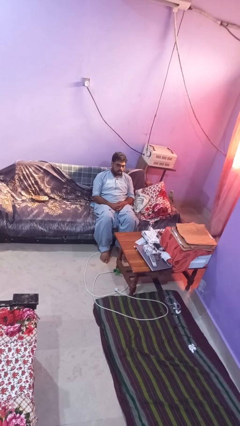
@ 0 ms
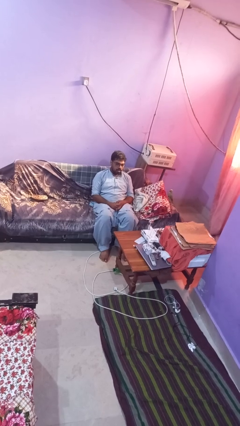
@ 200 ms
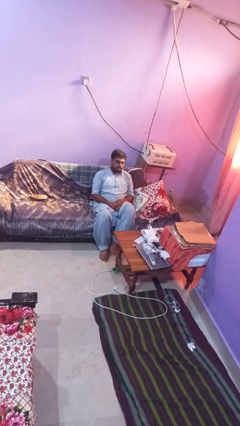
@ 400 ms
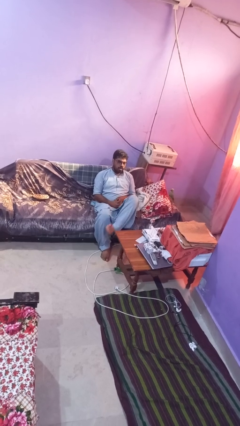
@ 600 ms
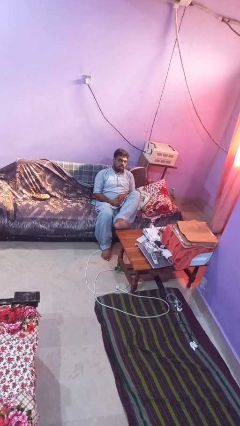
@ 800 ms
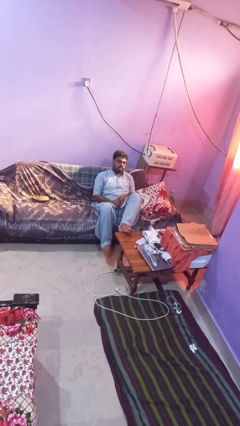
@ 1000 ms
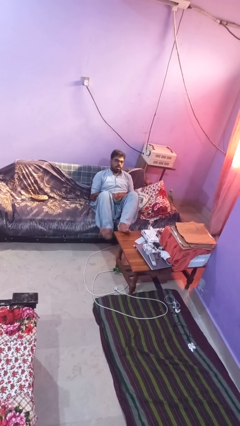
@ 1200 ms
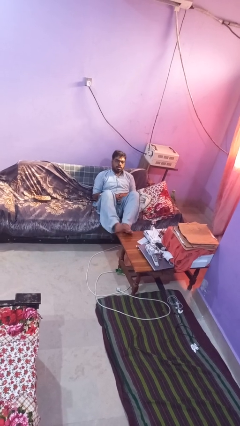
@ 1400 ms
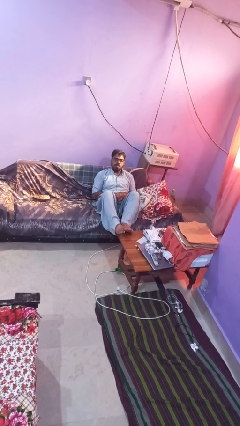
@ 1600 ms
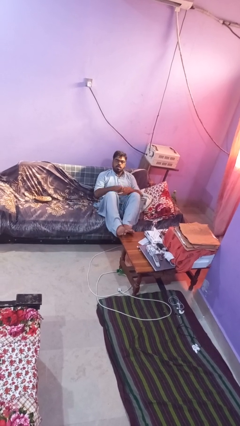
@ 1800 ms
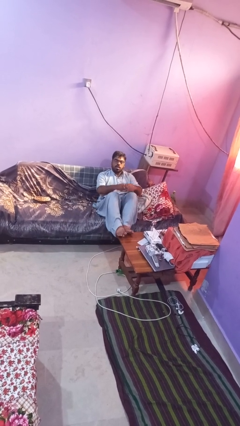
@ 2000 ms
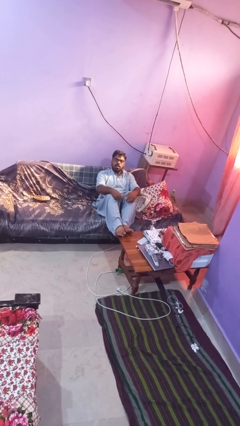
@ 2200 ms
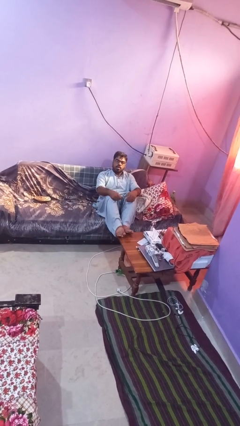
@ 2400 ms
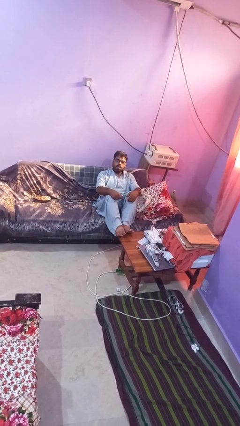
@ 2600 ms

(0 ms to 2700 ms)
person puts feet up

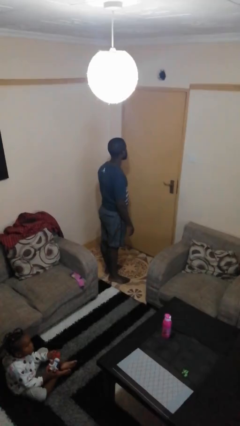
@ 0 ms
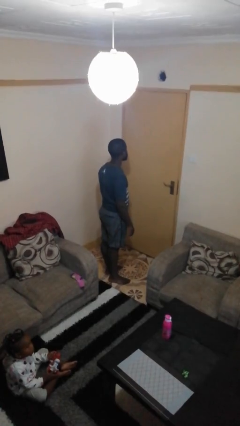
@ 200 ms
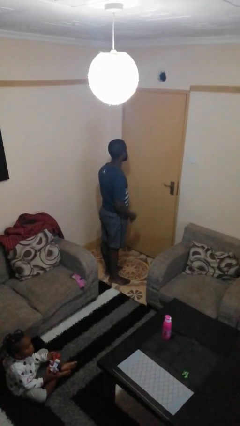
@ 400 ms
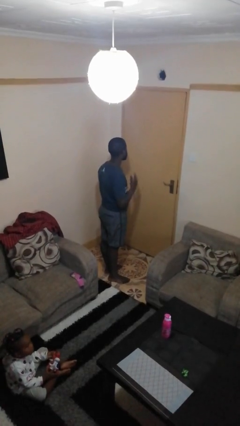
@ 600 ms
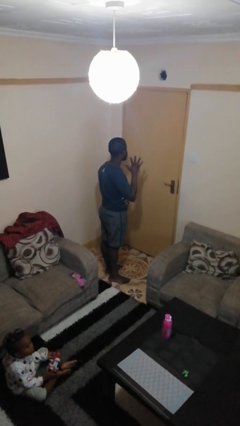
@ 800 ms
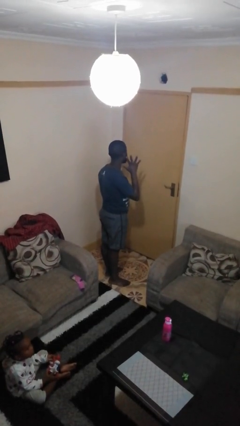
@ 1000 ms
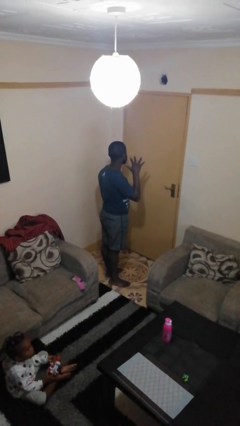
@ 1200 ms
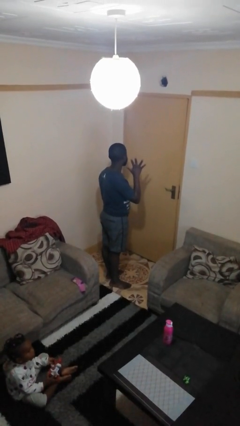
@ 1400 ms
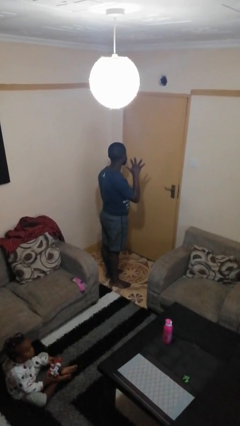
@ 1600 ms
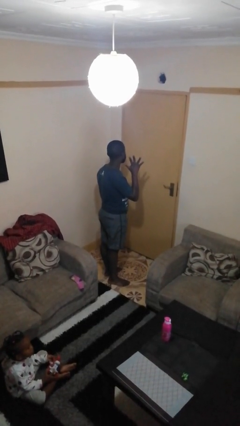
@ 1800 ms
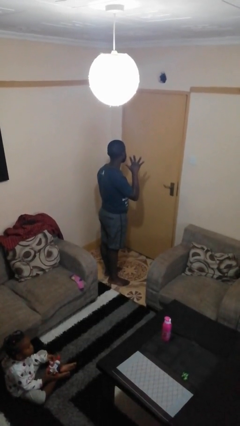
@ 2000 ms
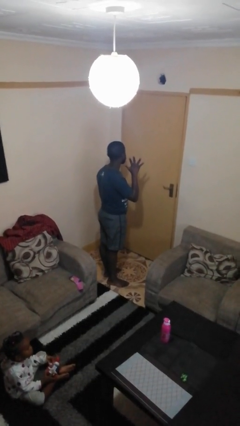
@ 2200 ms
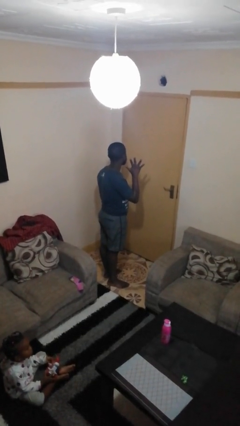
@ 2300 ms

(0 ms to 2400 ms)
person gestures number five

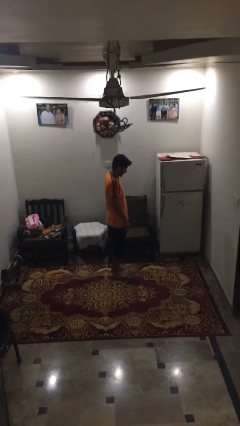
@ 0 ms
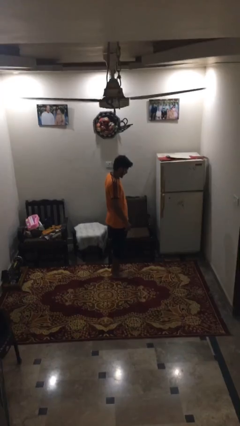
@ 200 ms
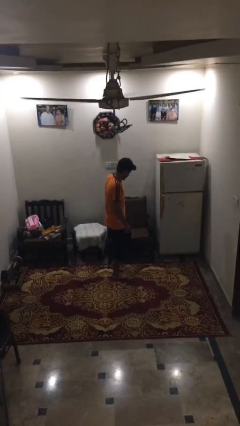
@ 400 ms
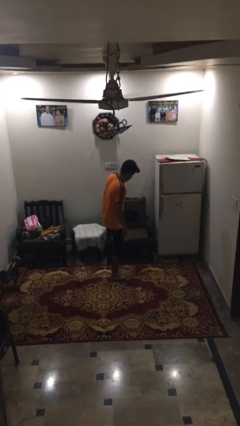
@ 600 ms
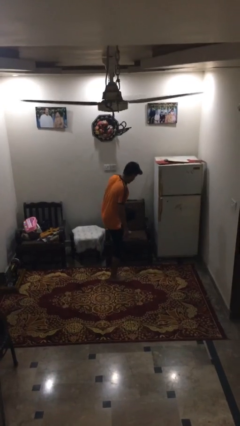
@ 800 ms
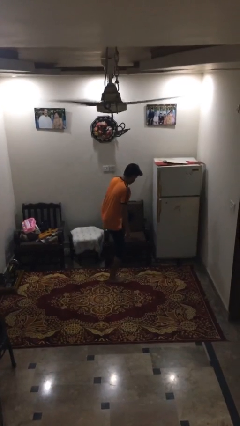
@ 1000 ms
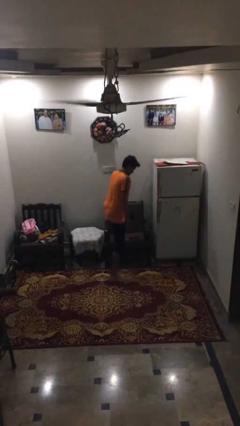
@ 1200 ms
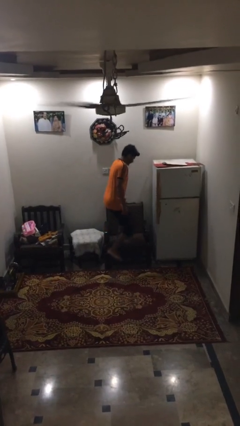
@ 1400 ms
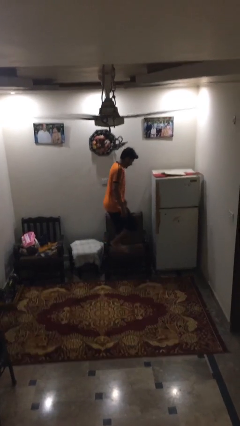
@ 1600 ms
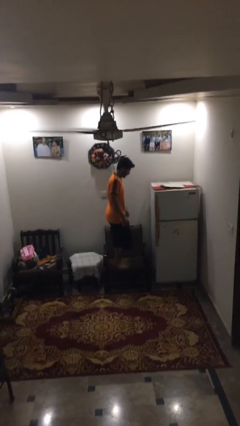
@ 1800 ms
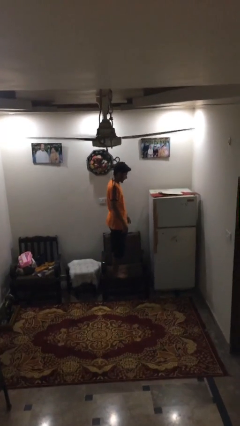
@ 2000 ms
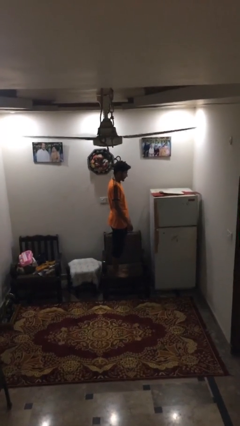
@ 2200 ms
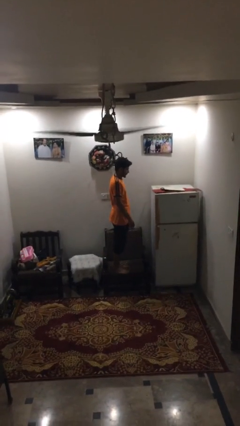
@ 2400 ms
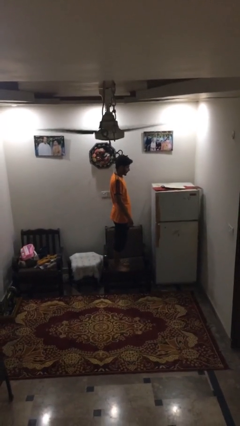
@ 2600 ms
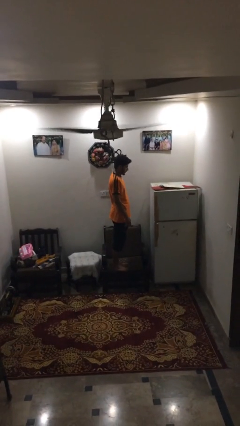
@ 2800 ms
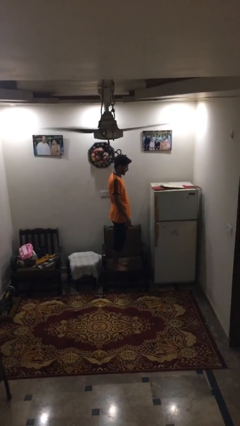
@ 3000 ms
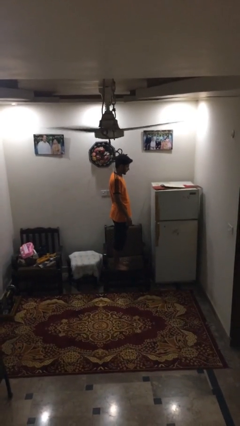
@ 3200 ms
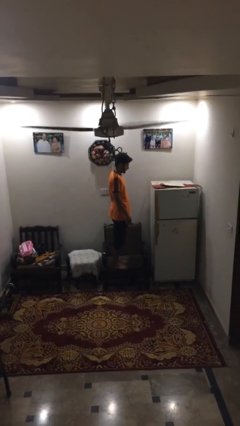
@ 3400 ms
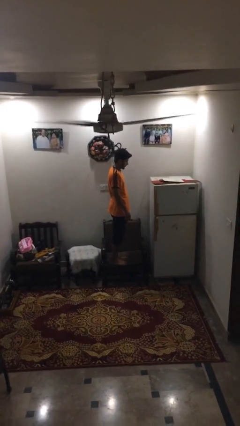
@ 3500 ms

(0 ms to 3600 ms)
person climbs on couch

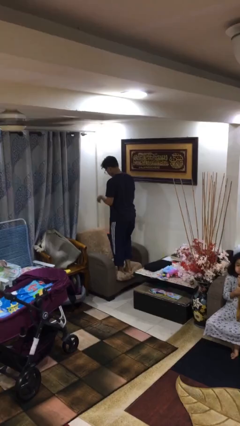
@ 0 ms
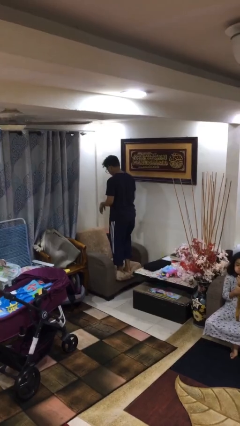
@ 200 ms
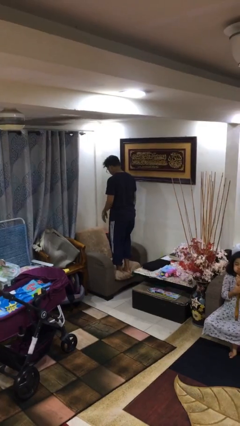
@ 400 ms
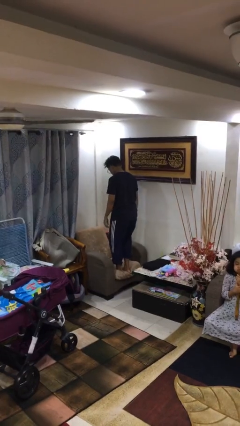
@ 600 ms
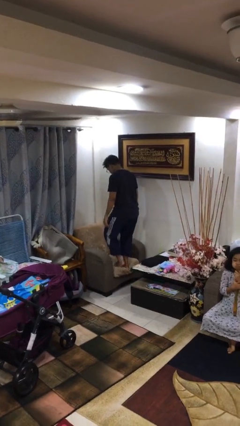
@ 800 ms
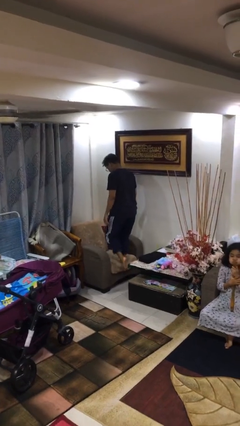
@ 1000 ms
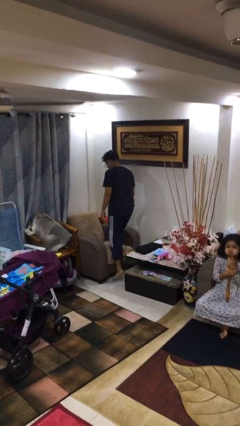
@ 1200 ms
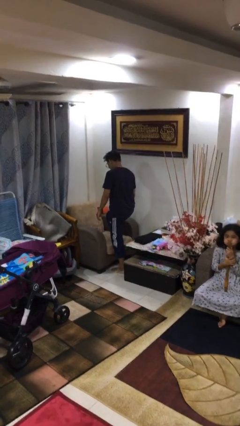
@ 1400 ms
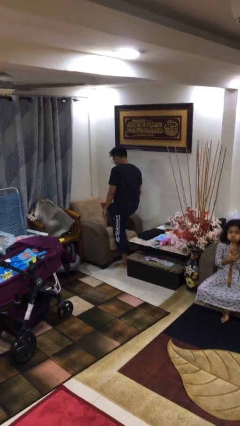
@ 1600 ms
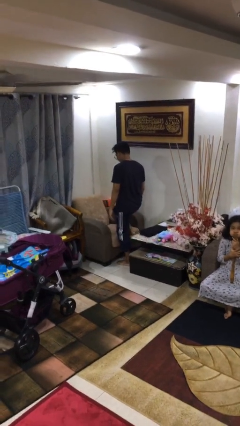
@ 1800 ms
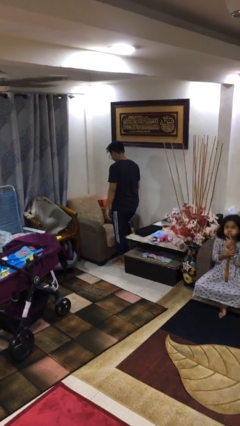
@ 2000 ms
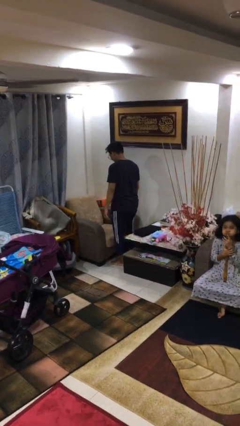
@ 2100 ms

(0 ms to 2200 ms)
person climbs off couch

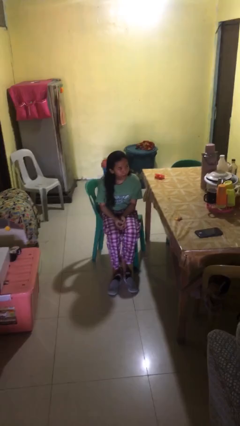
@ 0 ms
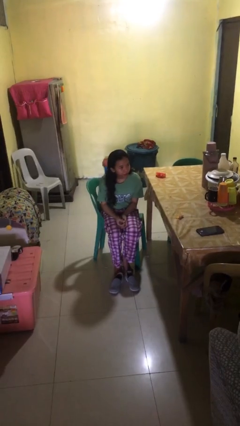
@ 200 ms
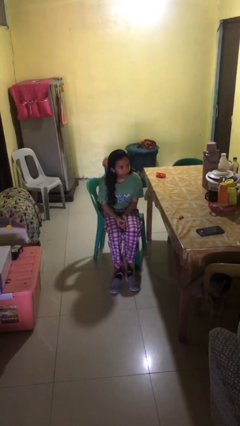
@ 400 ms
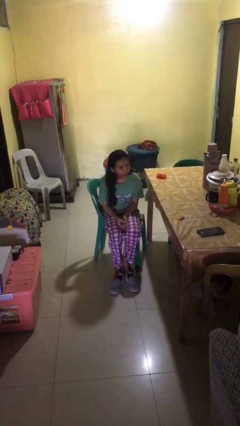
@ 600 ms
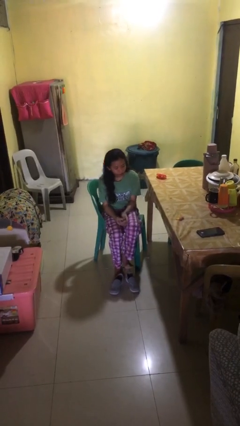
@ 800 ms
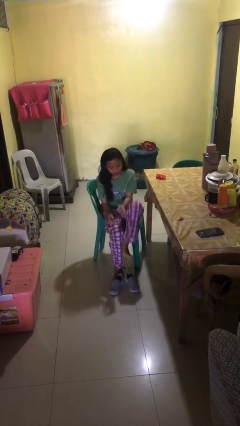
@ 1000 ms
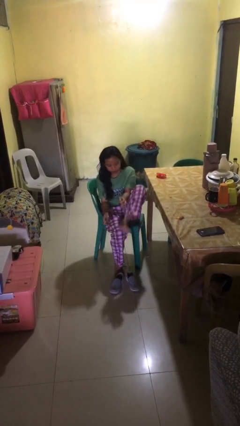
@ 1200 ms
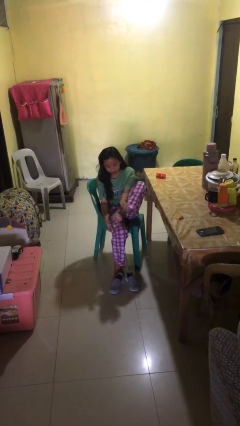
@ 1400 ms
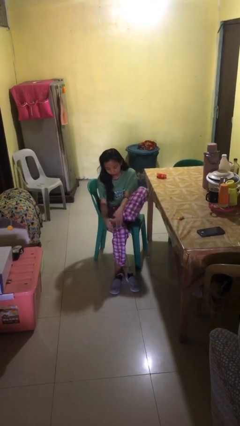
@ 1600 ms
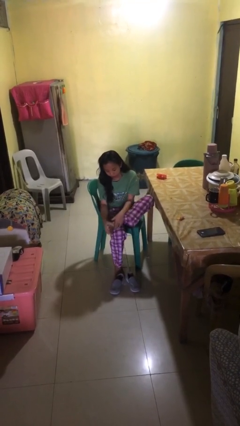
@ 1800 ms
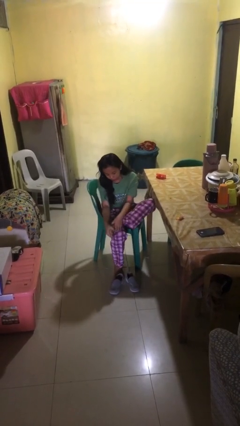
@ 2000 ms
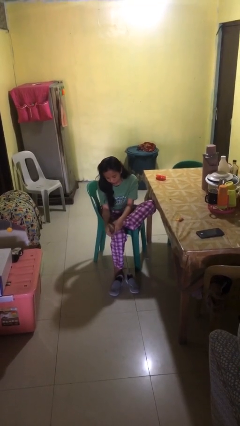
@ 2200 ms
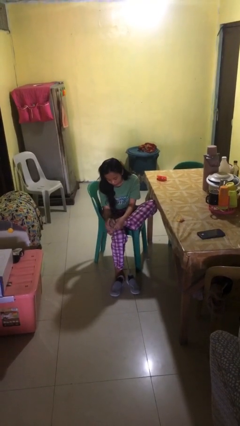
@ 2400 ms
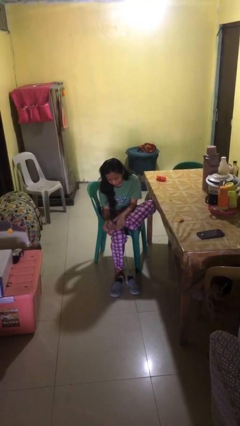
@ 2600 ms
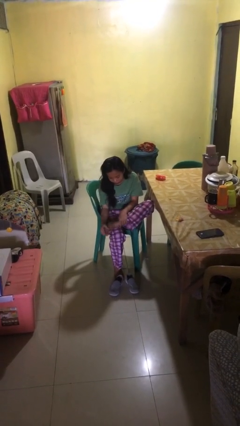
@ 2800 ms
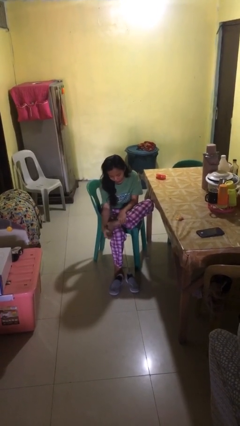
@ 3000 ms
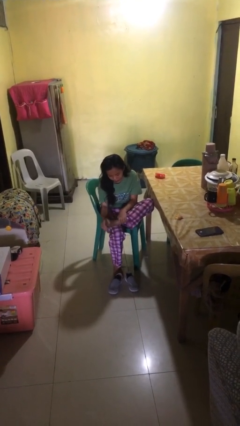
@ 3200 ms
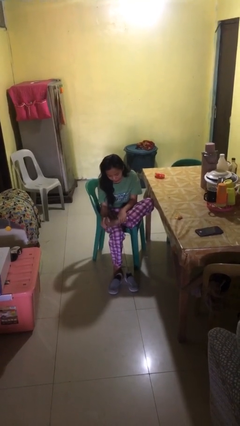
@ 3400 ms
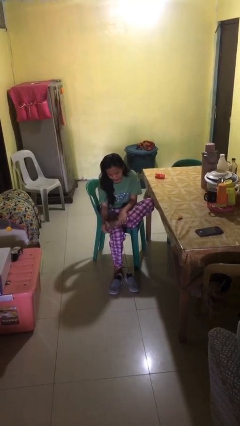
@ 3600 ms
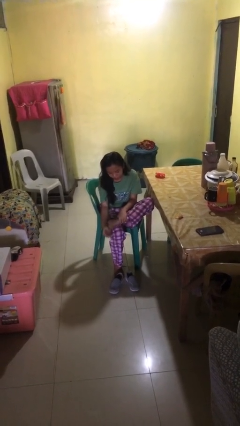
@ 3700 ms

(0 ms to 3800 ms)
person rubs foot

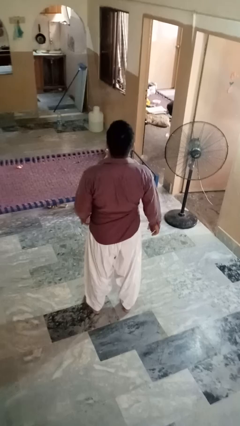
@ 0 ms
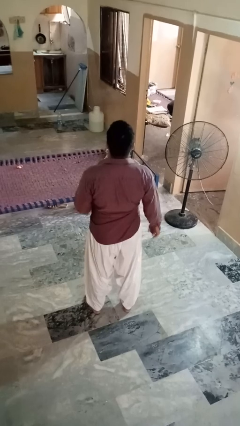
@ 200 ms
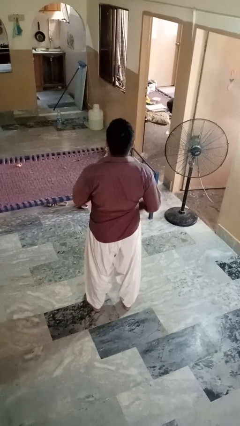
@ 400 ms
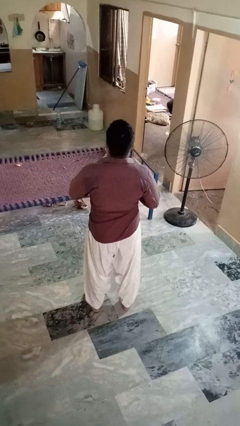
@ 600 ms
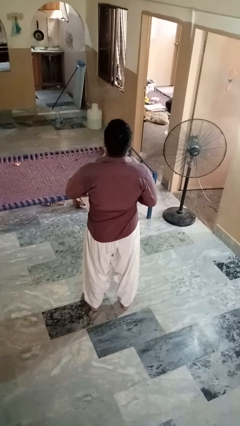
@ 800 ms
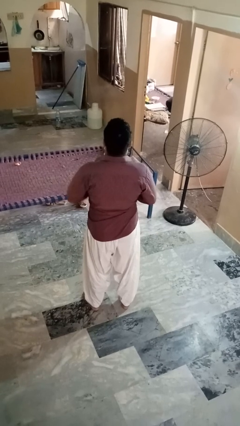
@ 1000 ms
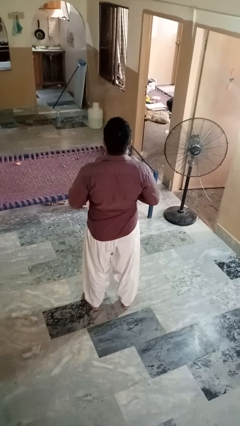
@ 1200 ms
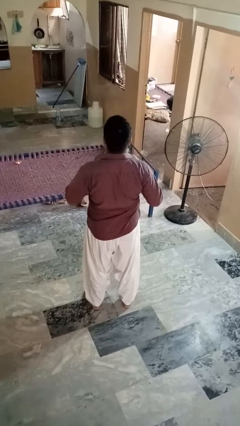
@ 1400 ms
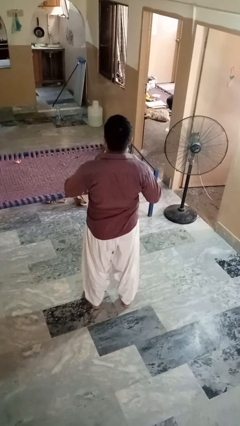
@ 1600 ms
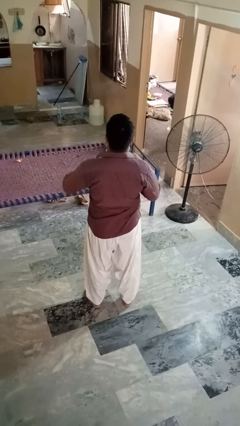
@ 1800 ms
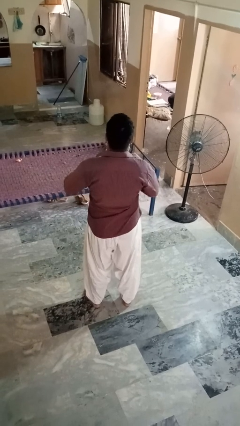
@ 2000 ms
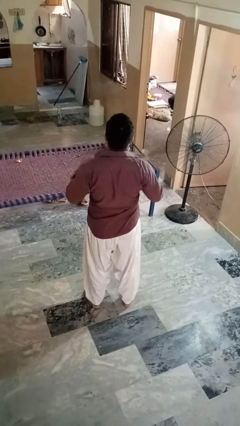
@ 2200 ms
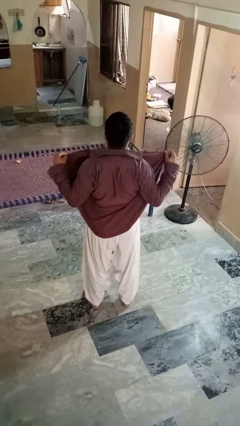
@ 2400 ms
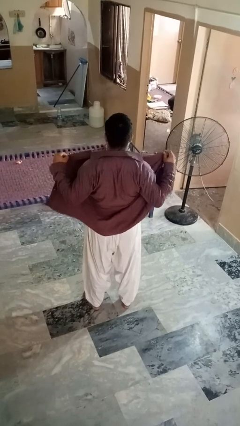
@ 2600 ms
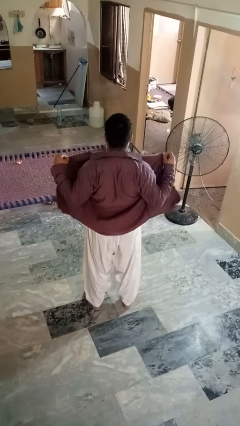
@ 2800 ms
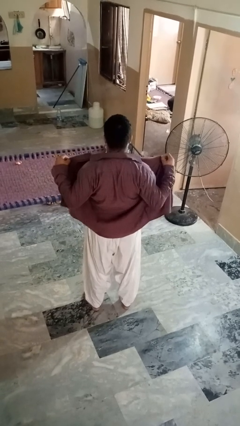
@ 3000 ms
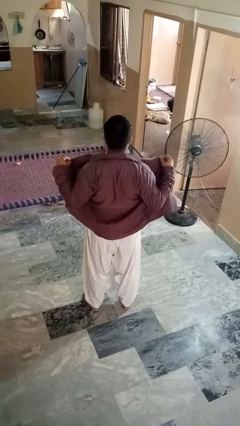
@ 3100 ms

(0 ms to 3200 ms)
person unbuttons shirt
